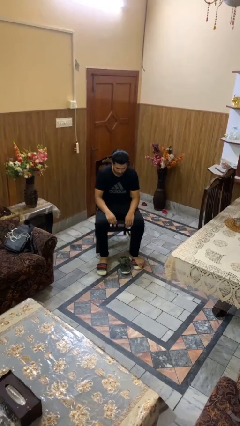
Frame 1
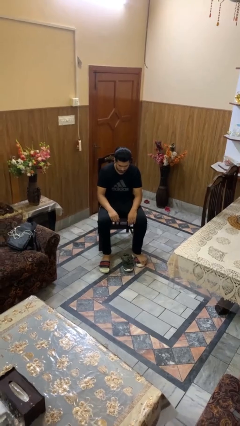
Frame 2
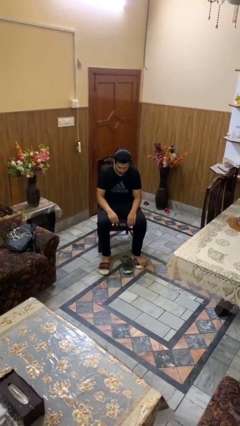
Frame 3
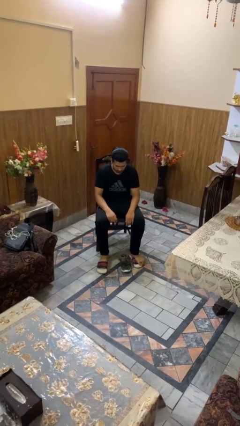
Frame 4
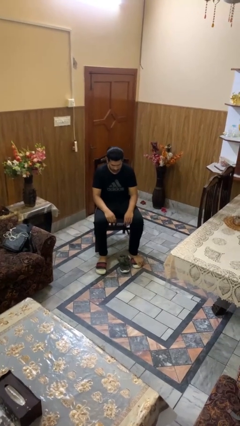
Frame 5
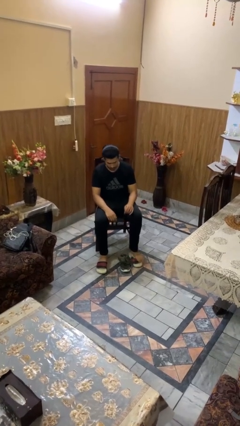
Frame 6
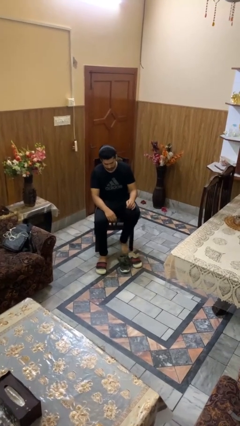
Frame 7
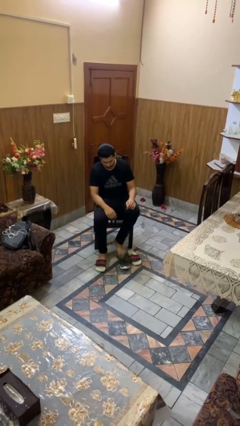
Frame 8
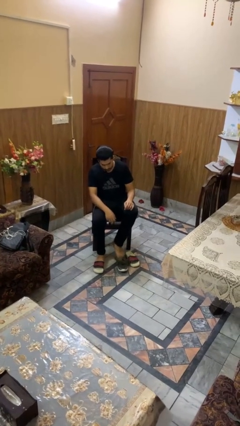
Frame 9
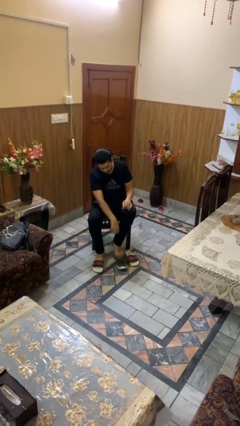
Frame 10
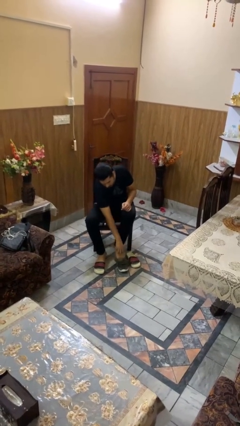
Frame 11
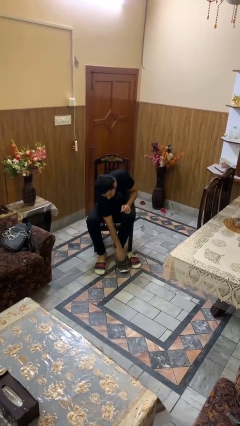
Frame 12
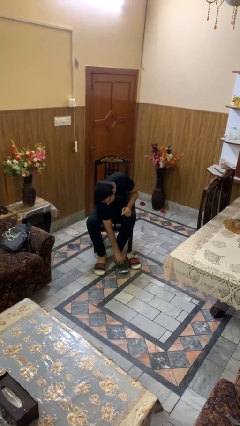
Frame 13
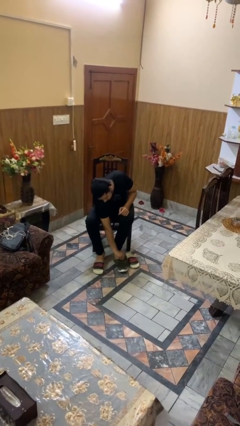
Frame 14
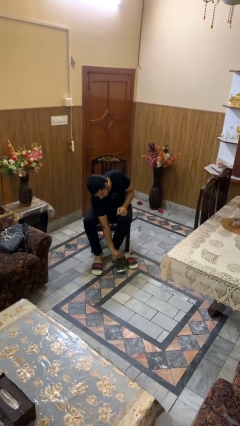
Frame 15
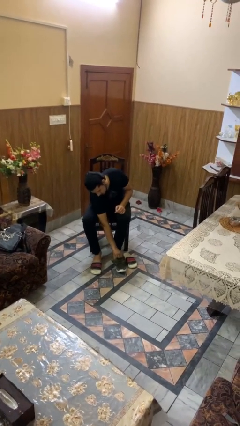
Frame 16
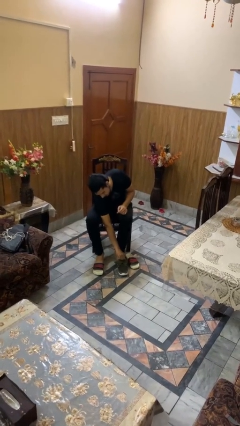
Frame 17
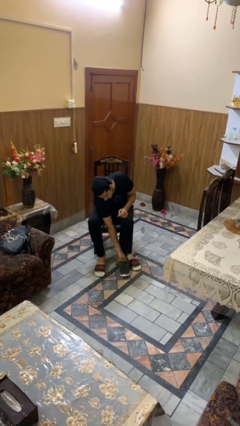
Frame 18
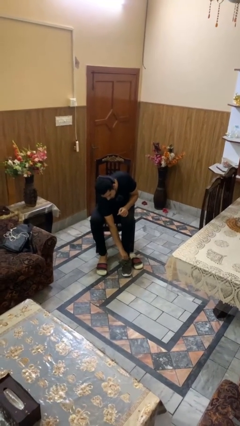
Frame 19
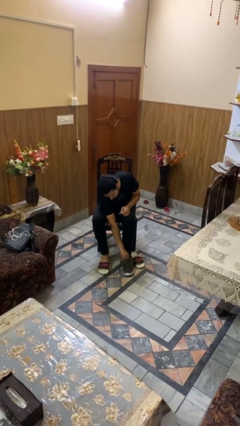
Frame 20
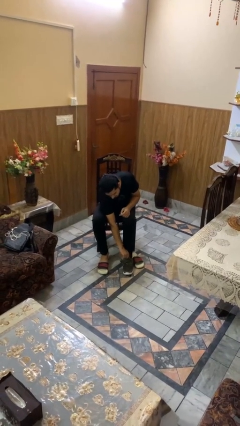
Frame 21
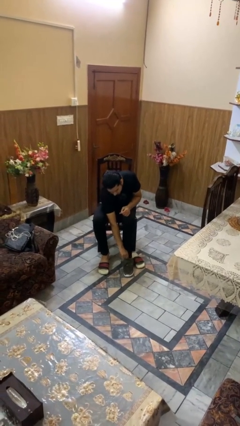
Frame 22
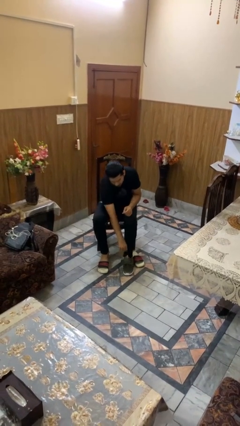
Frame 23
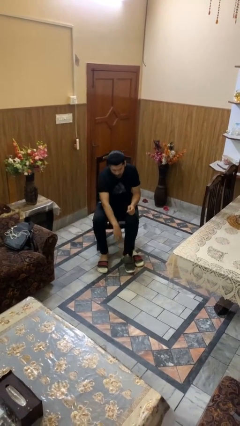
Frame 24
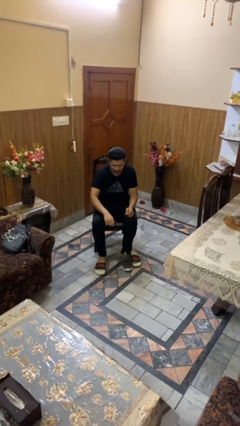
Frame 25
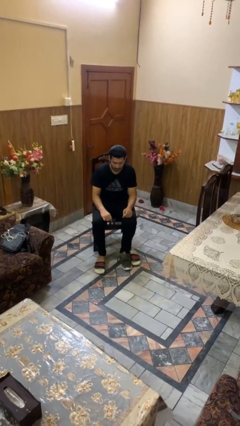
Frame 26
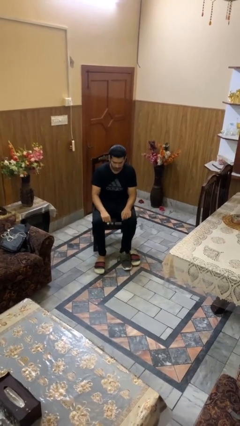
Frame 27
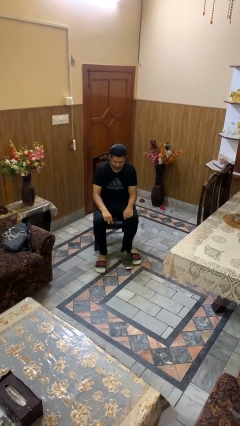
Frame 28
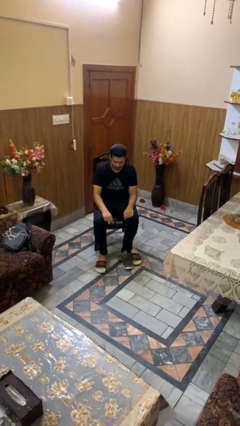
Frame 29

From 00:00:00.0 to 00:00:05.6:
person puts on shoes

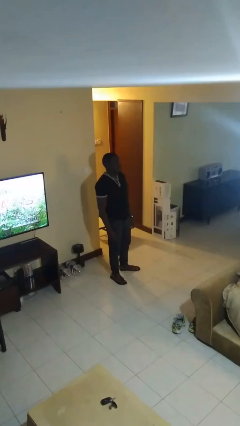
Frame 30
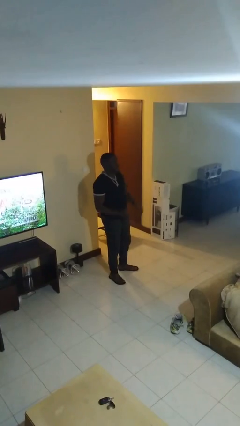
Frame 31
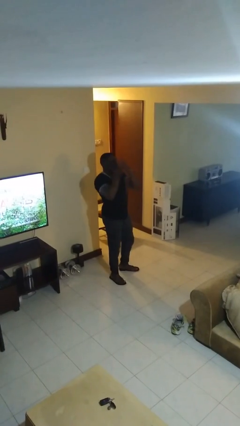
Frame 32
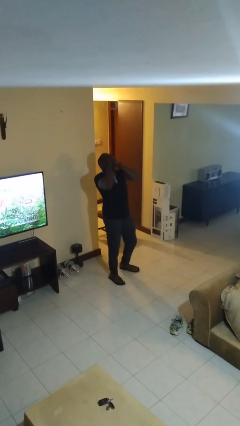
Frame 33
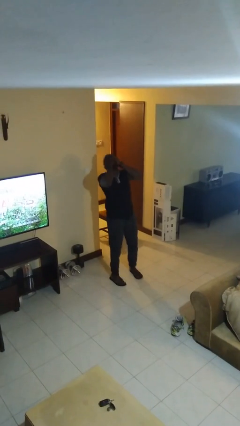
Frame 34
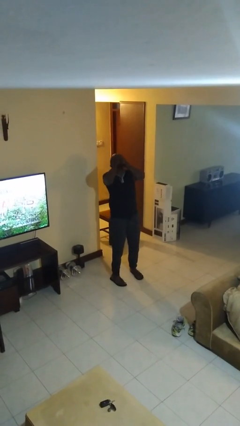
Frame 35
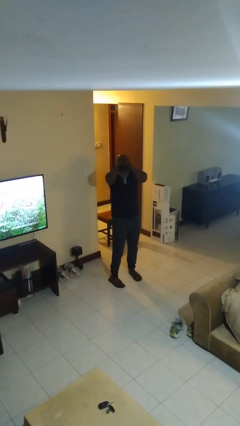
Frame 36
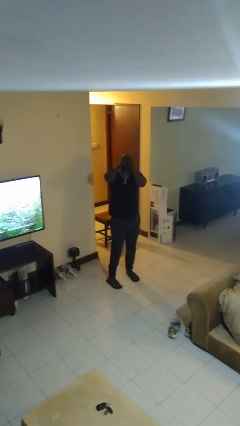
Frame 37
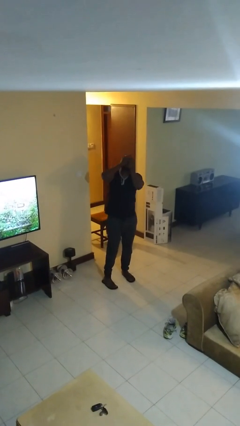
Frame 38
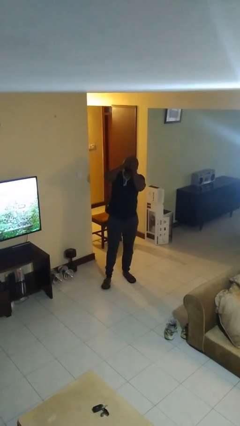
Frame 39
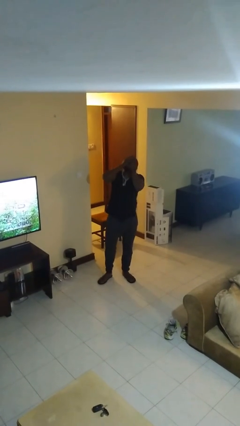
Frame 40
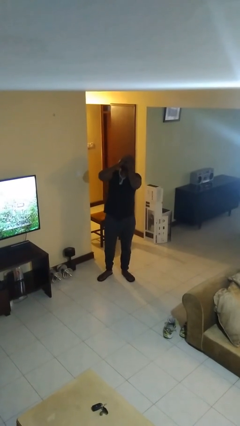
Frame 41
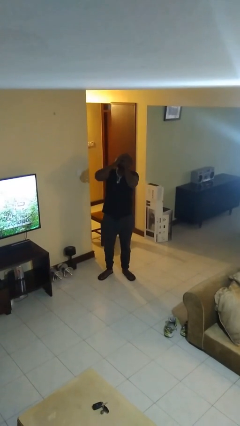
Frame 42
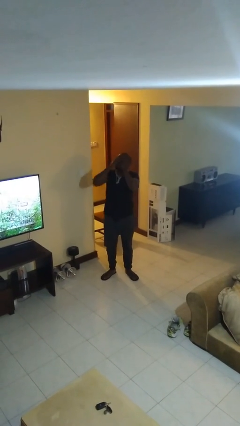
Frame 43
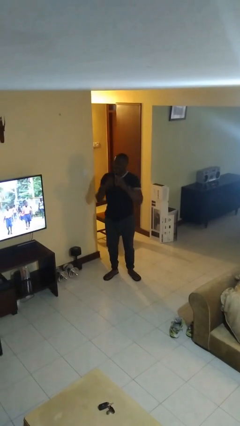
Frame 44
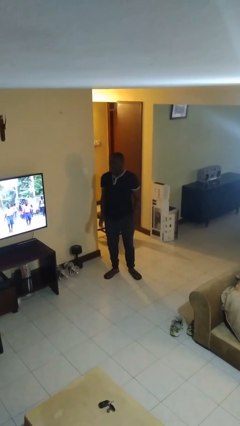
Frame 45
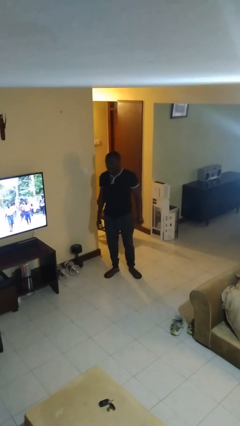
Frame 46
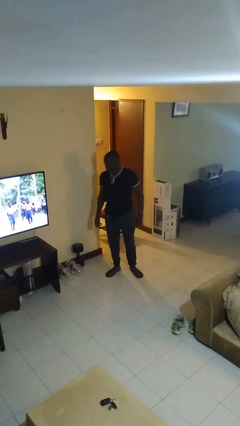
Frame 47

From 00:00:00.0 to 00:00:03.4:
person covers face with hands

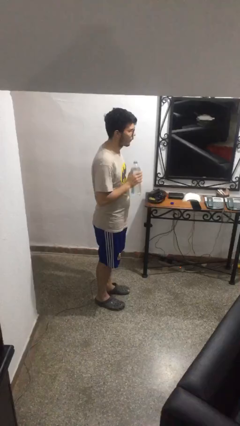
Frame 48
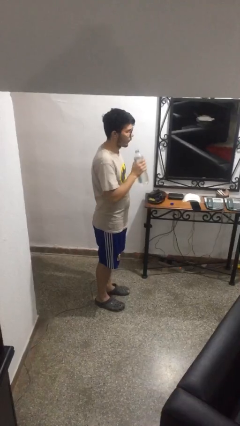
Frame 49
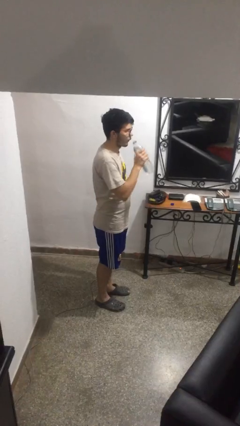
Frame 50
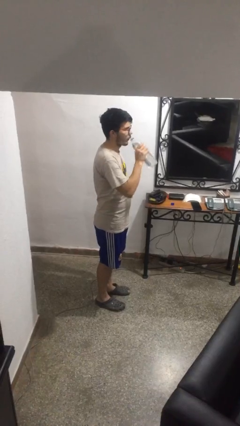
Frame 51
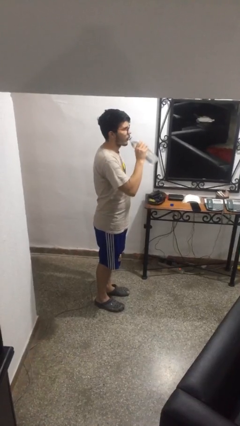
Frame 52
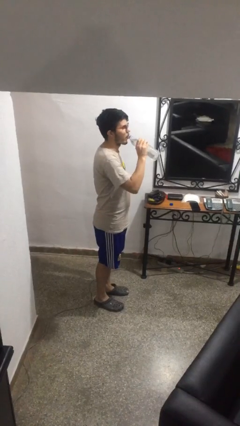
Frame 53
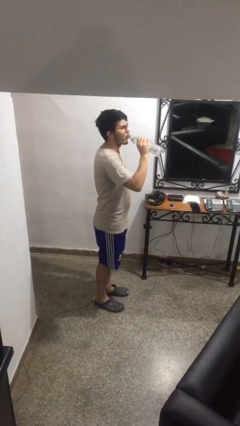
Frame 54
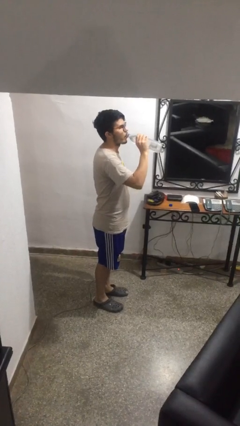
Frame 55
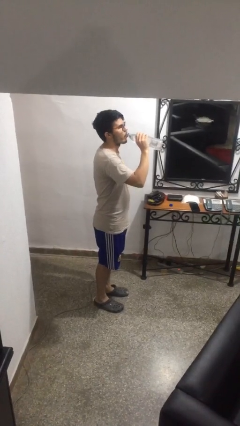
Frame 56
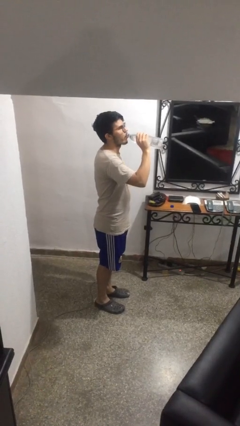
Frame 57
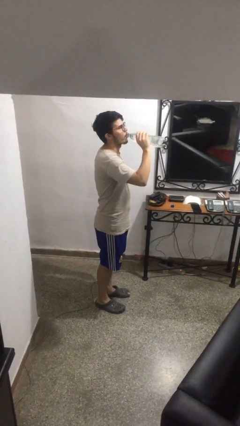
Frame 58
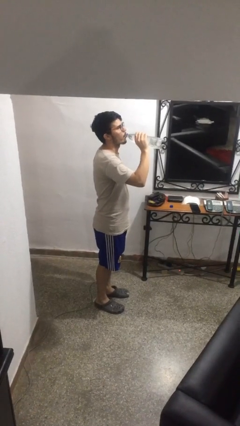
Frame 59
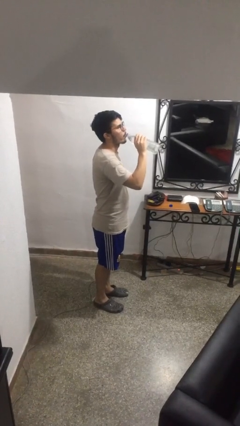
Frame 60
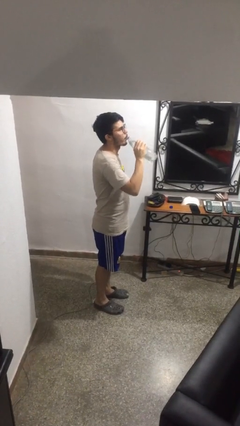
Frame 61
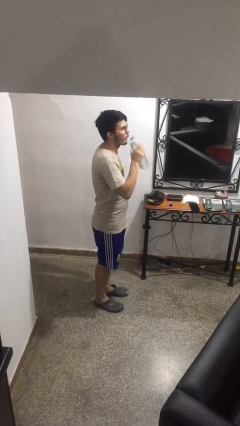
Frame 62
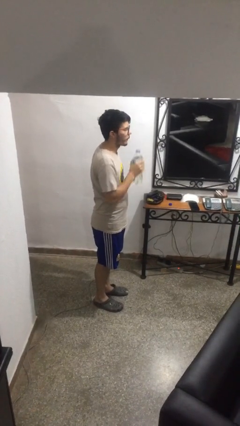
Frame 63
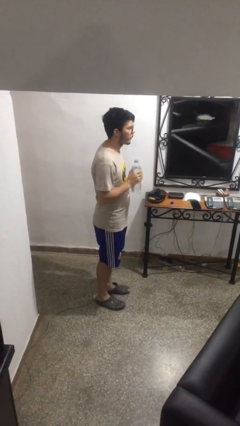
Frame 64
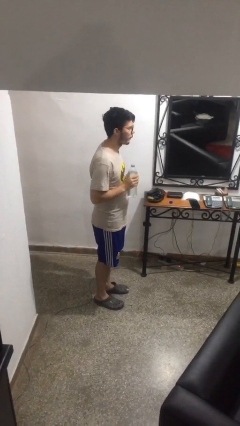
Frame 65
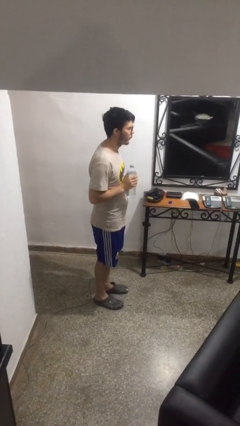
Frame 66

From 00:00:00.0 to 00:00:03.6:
person drinks from bottle

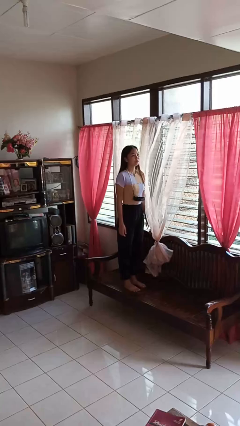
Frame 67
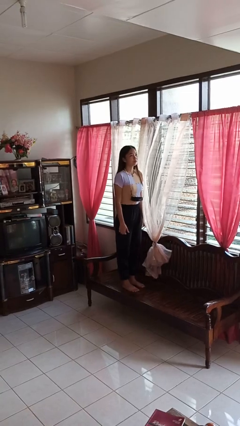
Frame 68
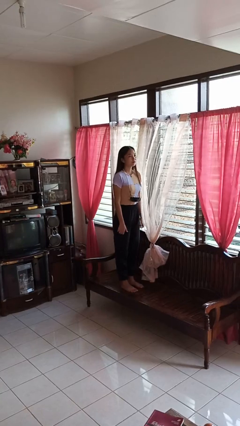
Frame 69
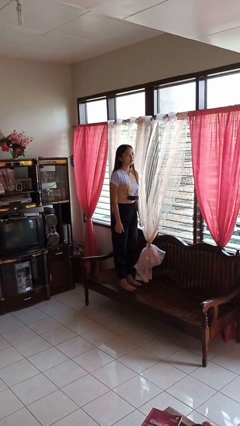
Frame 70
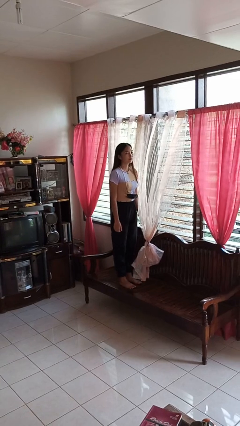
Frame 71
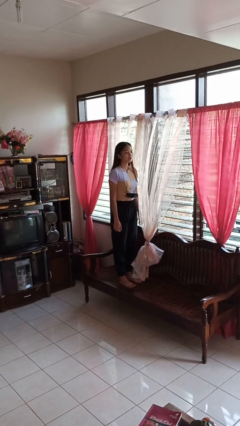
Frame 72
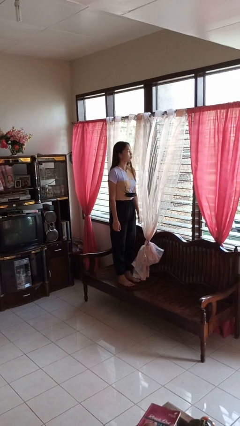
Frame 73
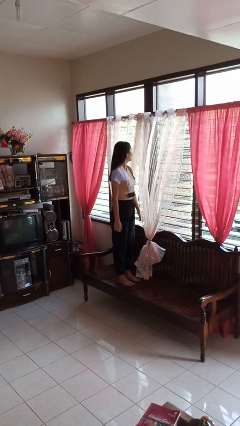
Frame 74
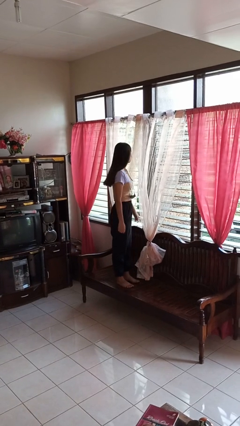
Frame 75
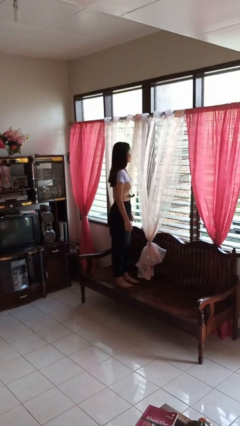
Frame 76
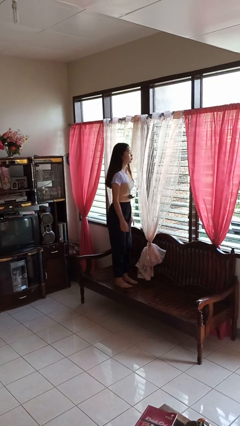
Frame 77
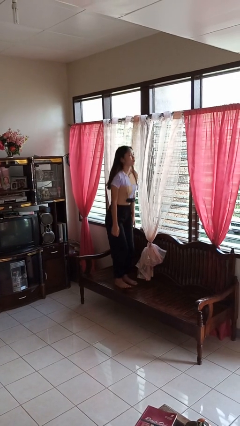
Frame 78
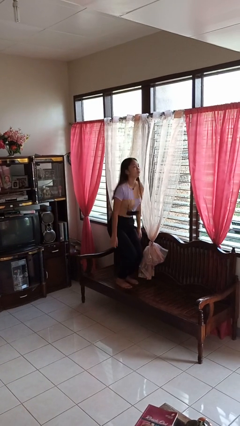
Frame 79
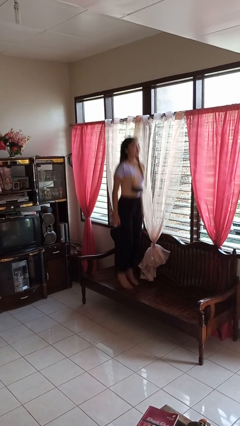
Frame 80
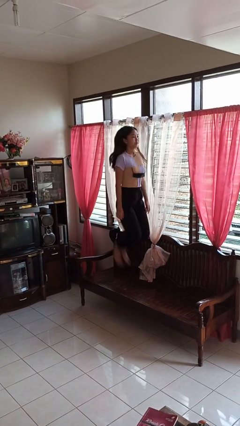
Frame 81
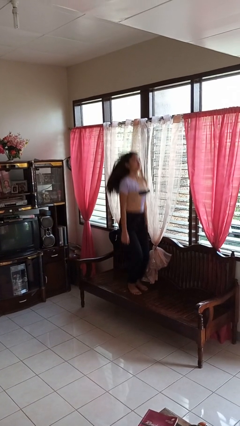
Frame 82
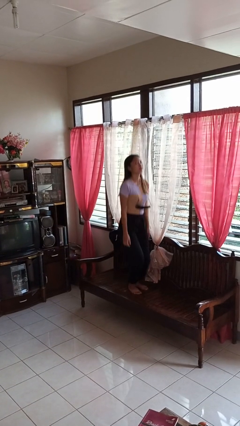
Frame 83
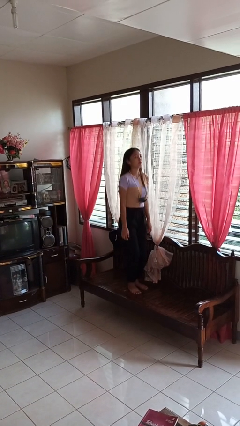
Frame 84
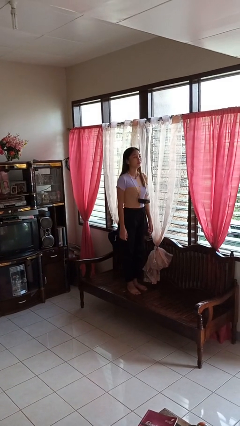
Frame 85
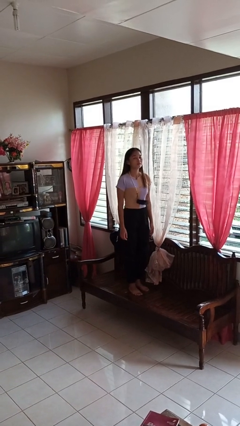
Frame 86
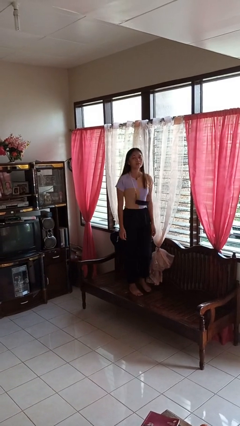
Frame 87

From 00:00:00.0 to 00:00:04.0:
person jumps on couch

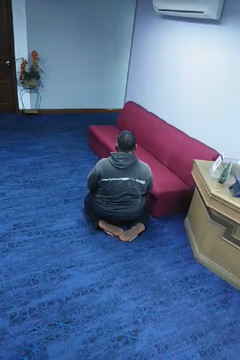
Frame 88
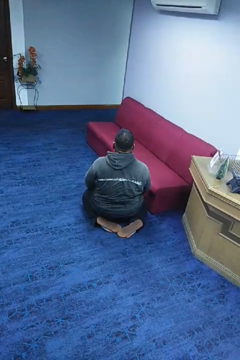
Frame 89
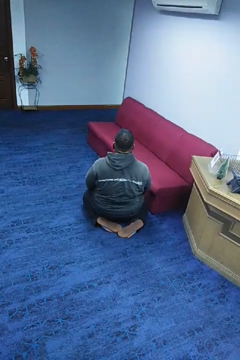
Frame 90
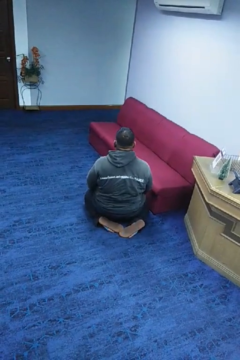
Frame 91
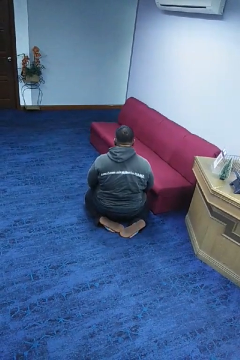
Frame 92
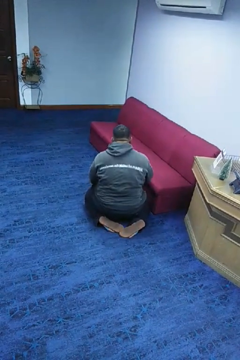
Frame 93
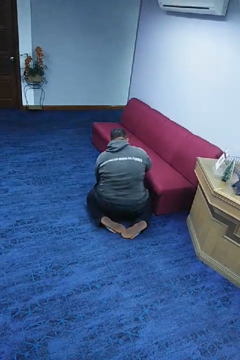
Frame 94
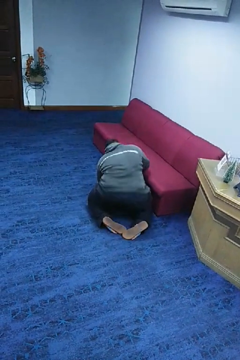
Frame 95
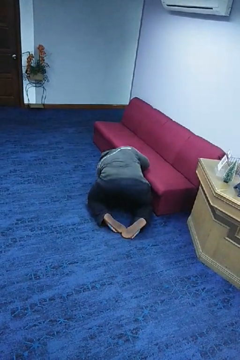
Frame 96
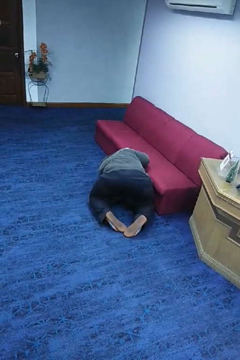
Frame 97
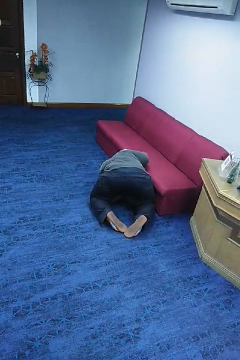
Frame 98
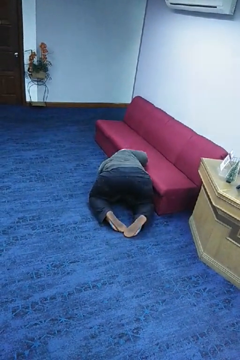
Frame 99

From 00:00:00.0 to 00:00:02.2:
person searches under couch
